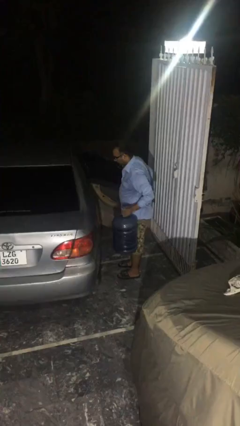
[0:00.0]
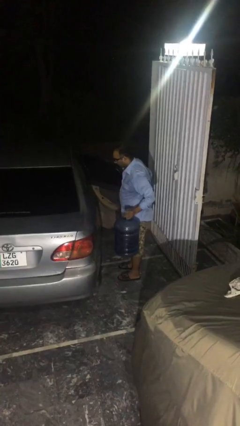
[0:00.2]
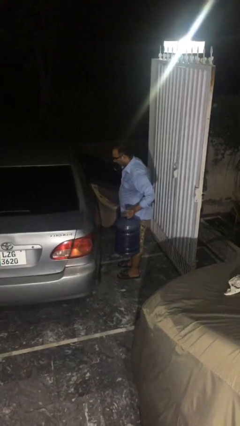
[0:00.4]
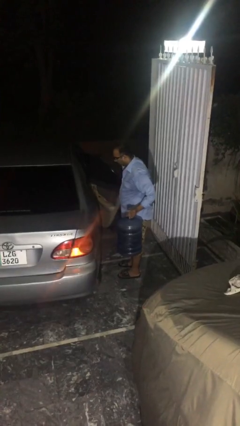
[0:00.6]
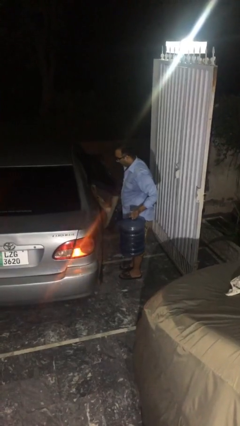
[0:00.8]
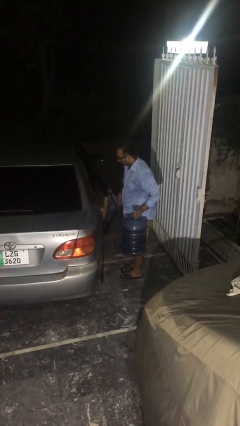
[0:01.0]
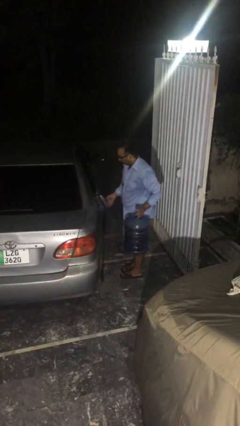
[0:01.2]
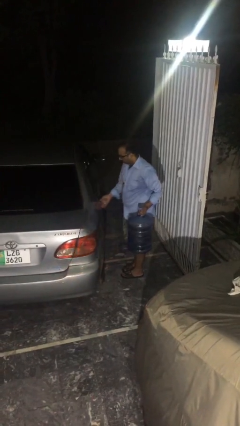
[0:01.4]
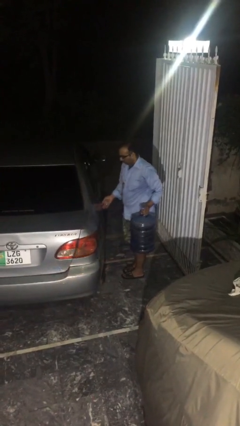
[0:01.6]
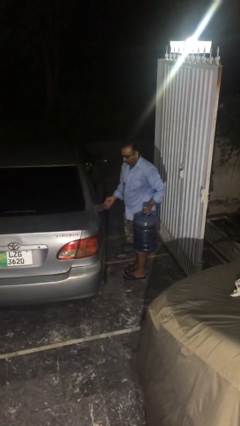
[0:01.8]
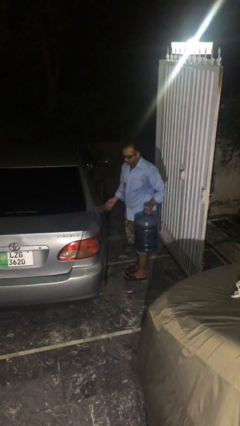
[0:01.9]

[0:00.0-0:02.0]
person closes car door

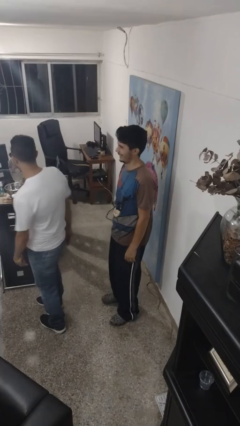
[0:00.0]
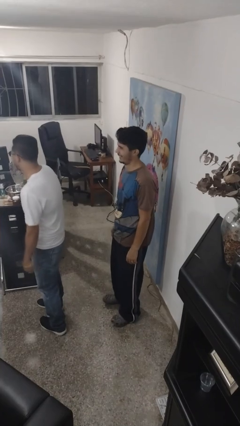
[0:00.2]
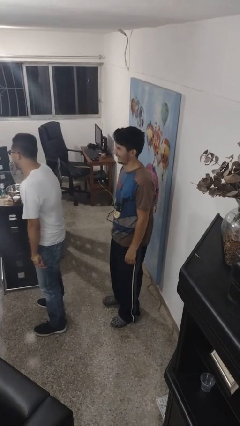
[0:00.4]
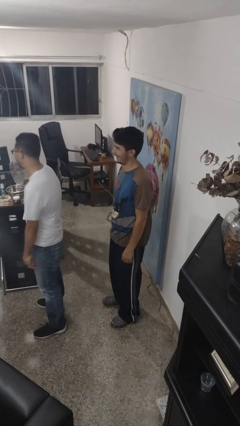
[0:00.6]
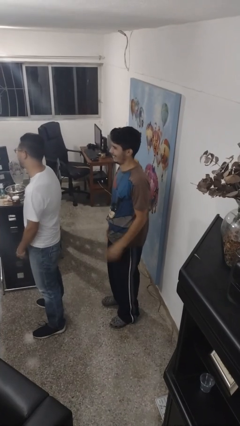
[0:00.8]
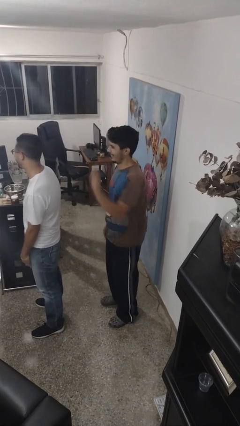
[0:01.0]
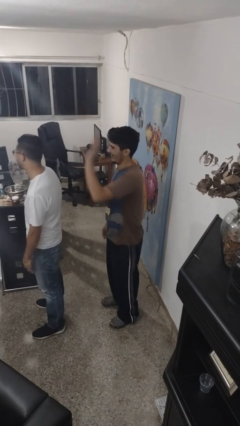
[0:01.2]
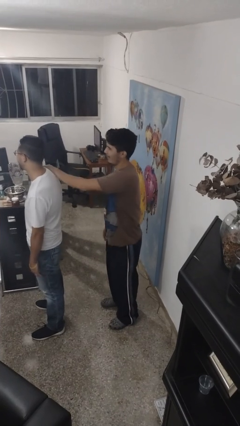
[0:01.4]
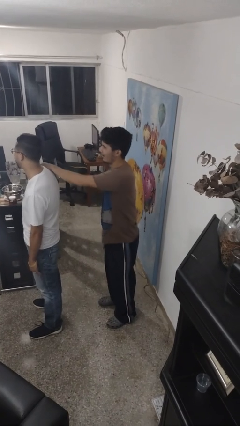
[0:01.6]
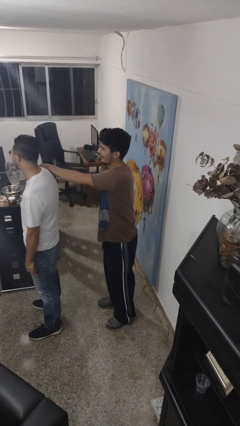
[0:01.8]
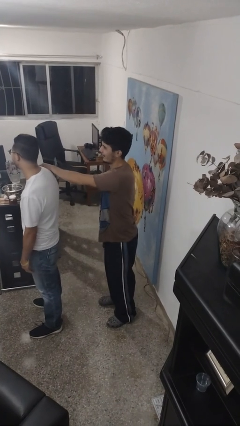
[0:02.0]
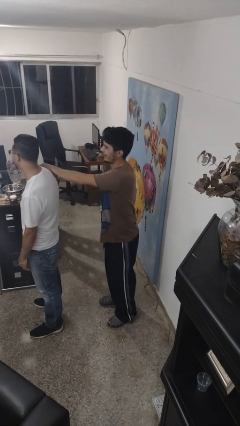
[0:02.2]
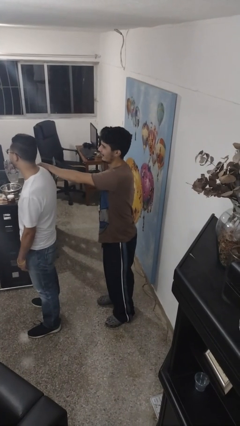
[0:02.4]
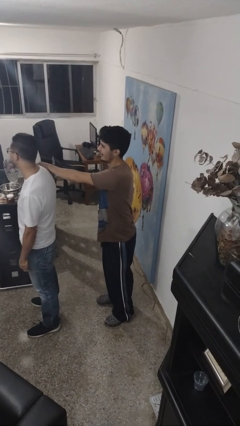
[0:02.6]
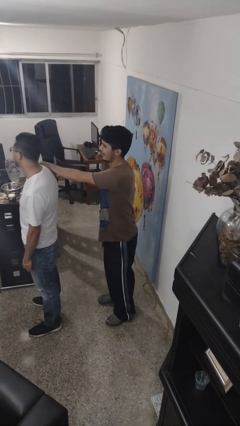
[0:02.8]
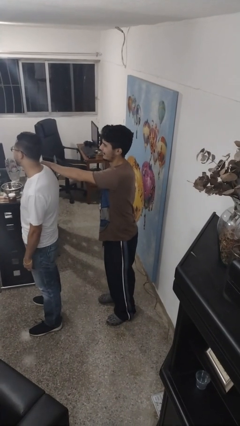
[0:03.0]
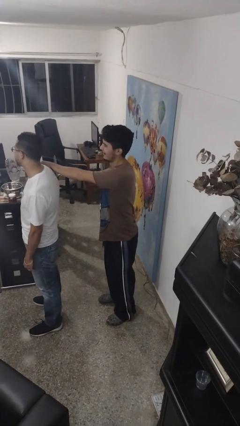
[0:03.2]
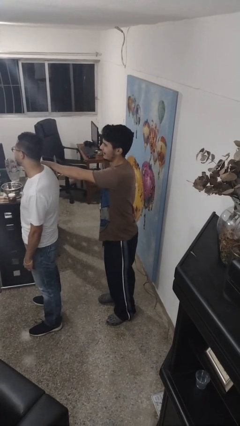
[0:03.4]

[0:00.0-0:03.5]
person grabs person by shoulder

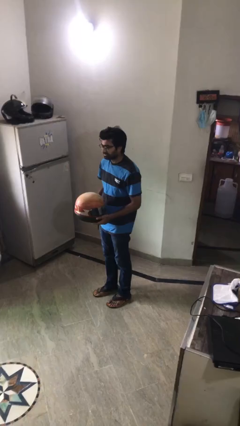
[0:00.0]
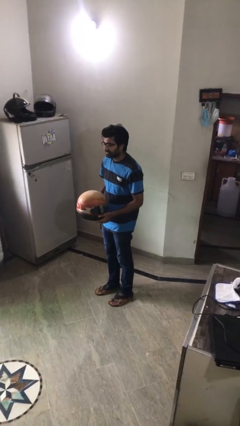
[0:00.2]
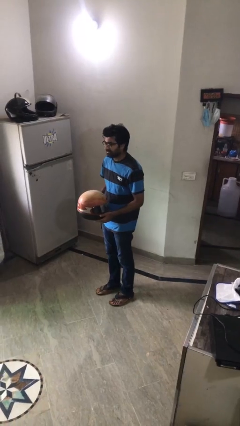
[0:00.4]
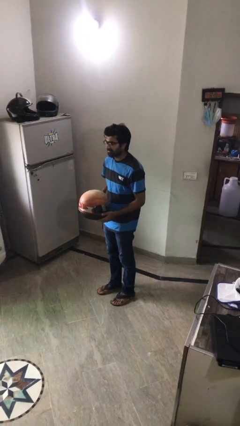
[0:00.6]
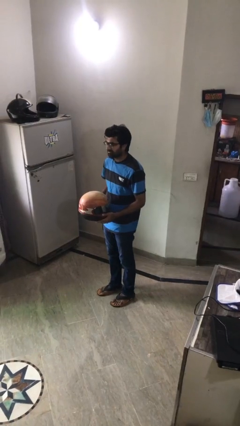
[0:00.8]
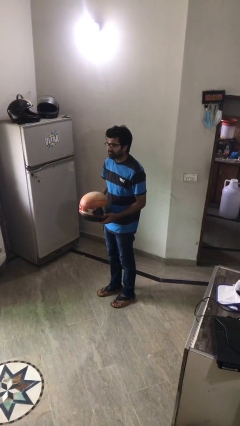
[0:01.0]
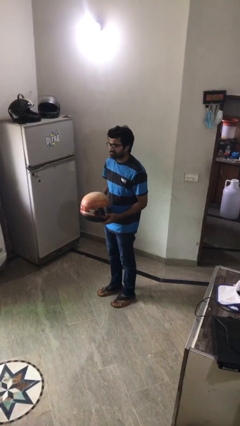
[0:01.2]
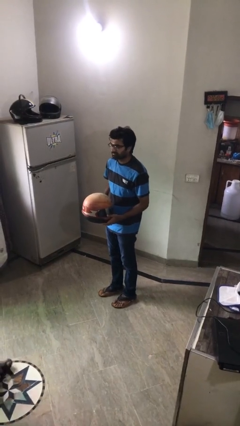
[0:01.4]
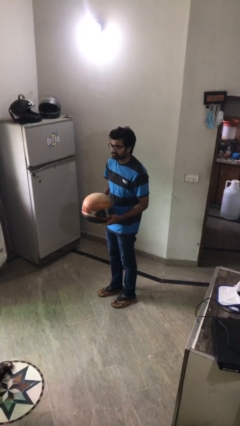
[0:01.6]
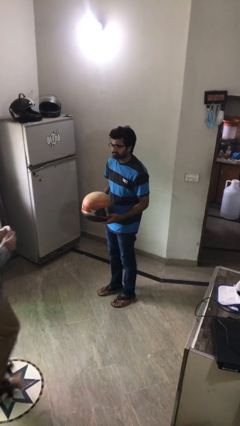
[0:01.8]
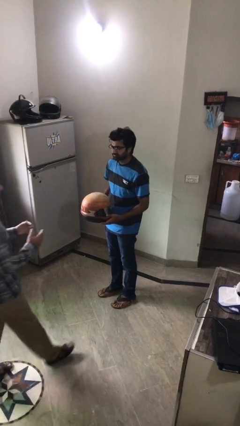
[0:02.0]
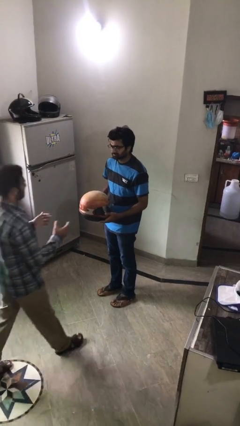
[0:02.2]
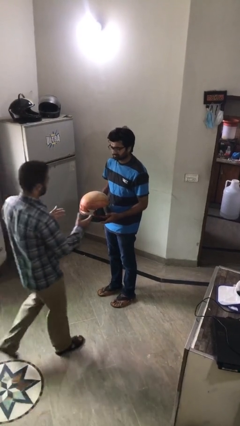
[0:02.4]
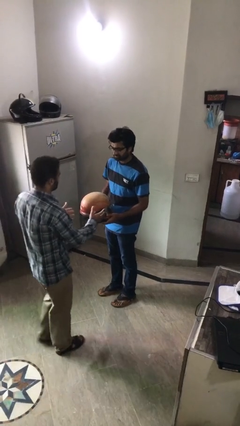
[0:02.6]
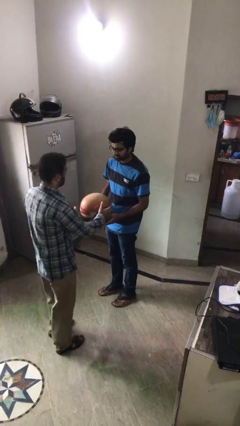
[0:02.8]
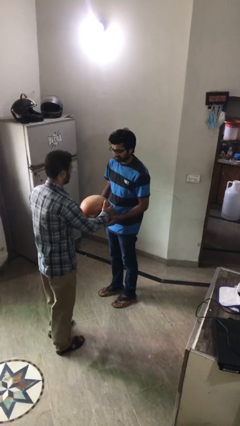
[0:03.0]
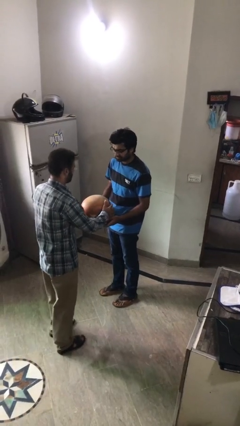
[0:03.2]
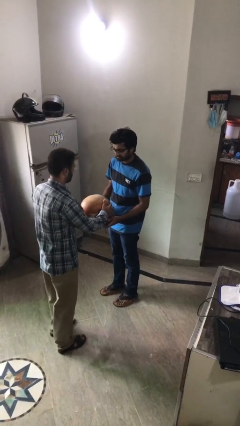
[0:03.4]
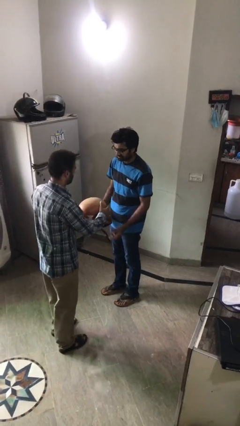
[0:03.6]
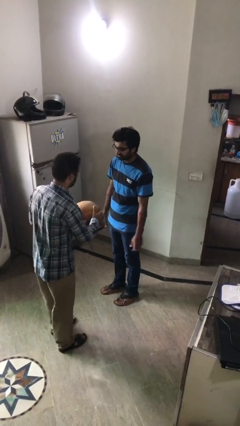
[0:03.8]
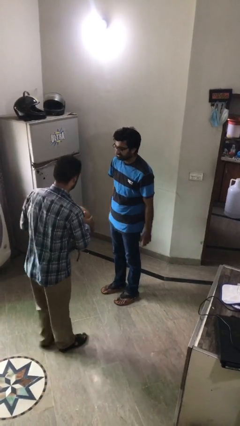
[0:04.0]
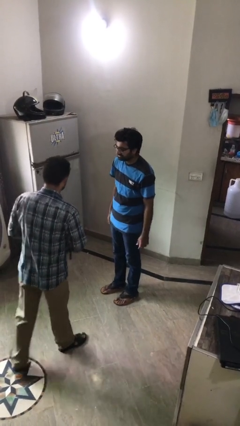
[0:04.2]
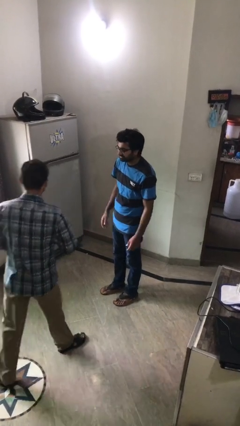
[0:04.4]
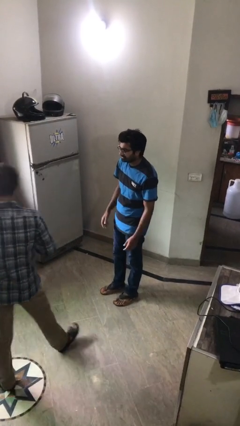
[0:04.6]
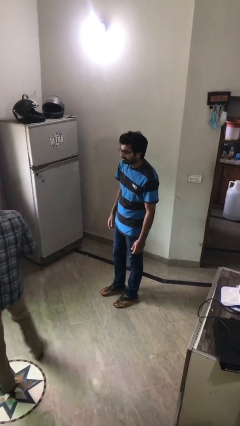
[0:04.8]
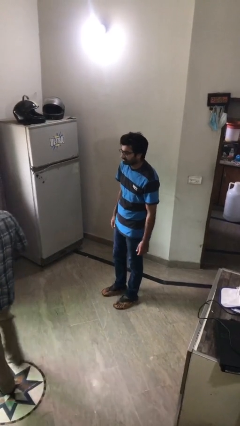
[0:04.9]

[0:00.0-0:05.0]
person transfers object to person

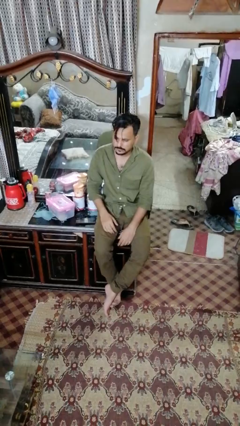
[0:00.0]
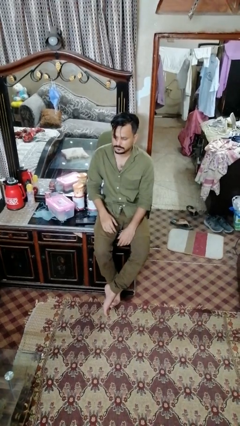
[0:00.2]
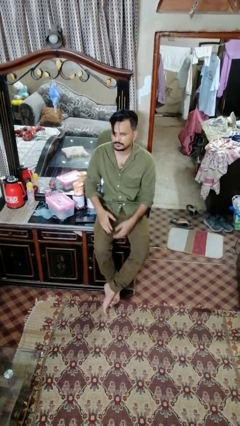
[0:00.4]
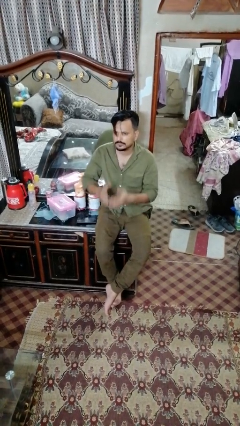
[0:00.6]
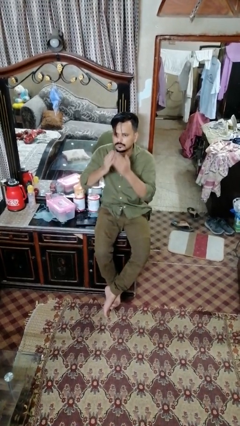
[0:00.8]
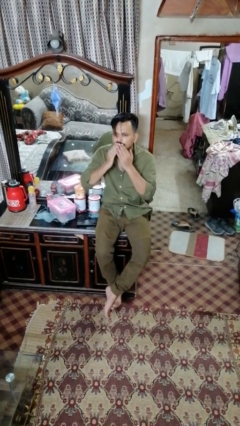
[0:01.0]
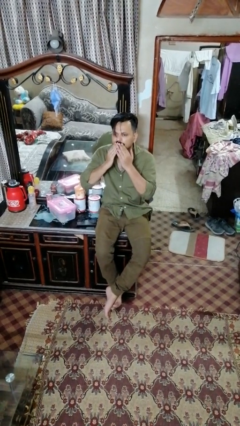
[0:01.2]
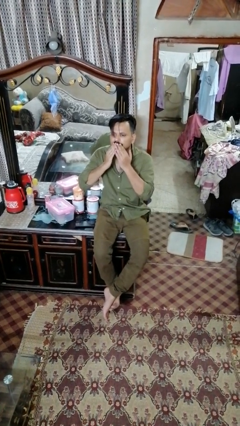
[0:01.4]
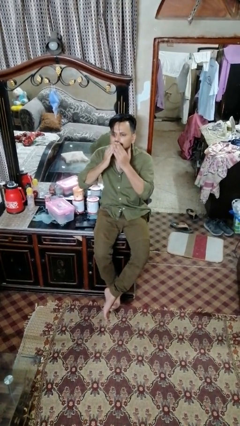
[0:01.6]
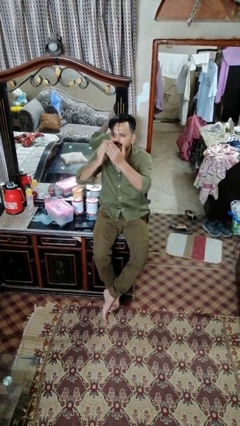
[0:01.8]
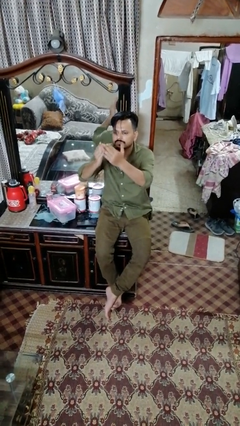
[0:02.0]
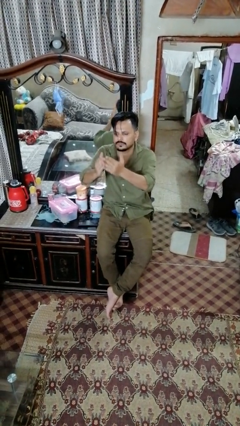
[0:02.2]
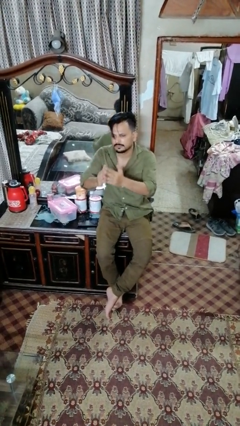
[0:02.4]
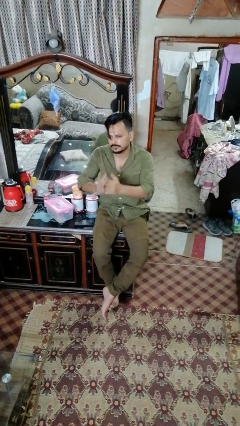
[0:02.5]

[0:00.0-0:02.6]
person gestures blow kiss

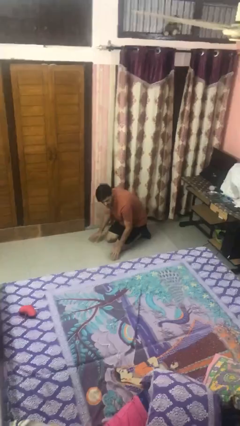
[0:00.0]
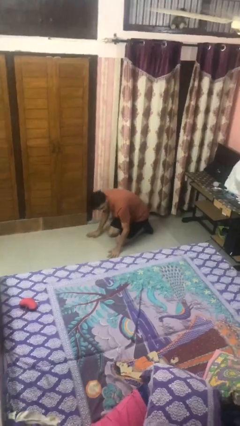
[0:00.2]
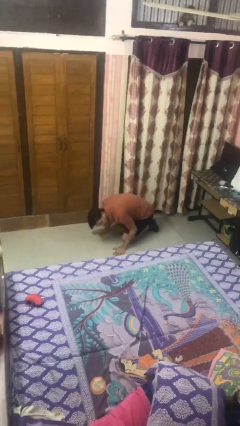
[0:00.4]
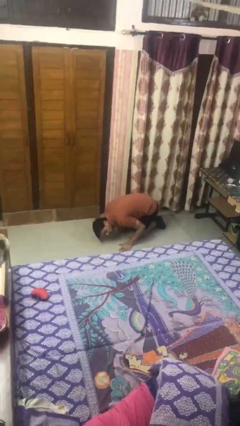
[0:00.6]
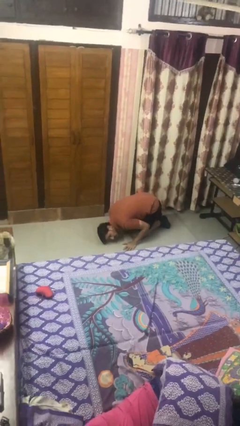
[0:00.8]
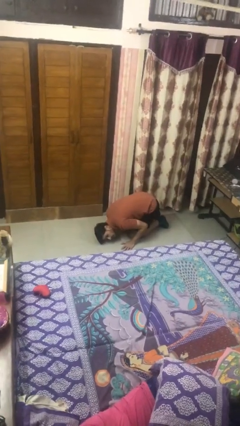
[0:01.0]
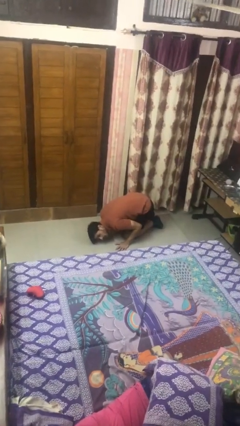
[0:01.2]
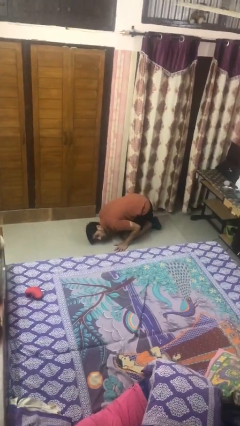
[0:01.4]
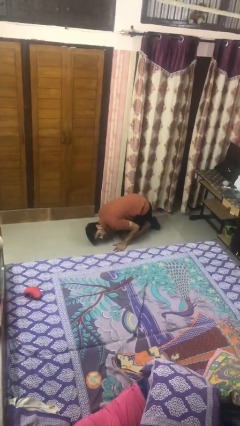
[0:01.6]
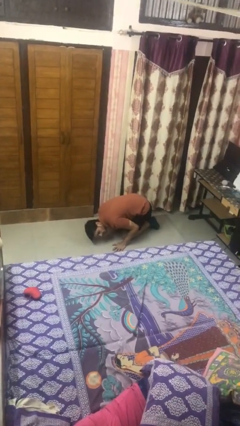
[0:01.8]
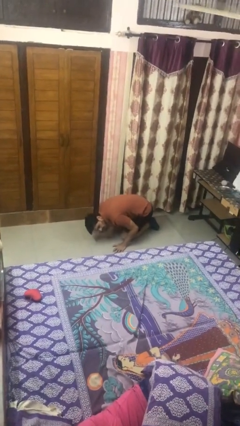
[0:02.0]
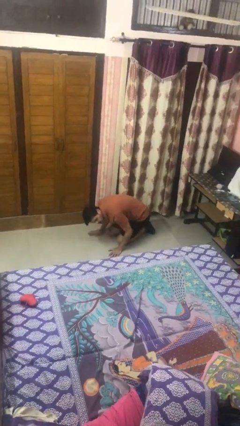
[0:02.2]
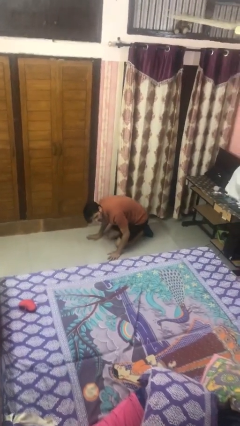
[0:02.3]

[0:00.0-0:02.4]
person searches under bed

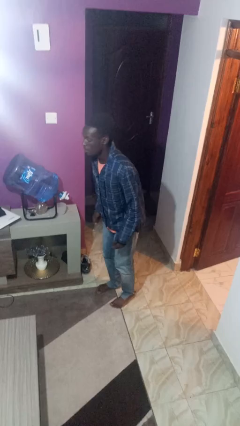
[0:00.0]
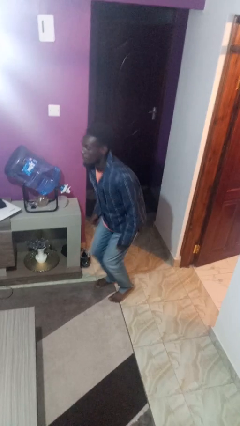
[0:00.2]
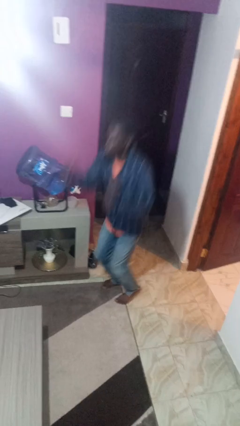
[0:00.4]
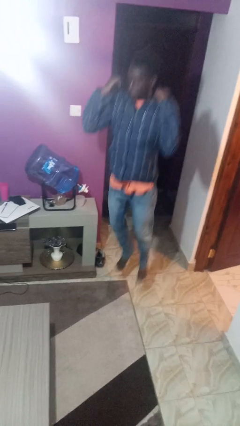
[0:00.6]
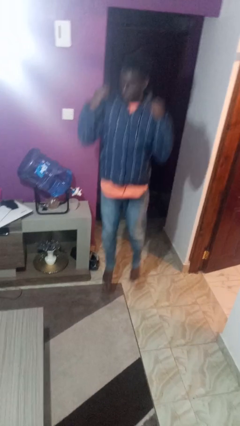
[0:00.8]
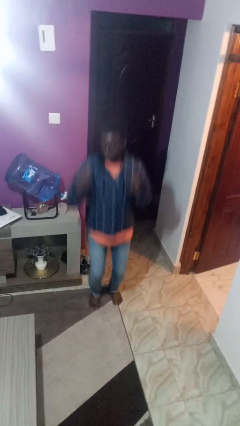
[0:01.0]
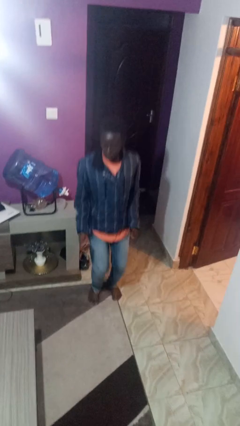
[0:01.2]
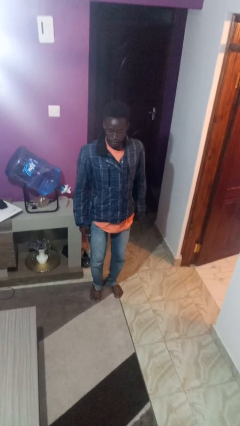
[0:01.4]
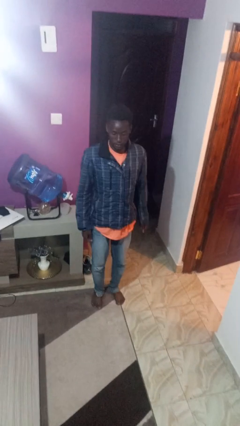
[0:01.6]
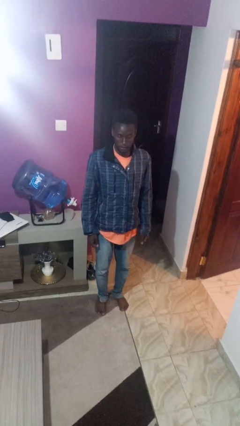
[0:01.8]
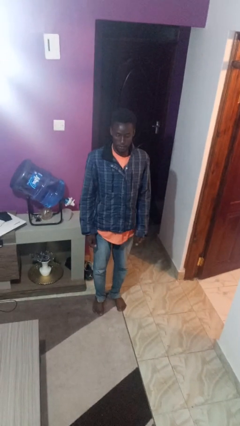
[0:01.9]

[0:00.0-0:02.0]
person jumps
